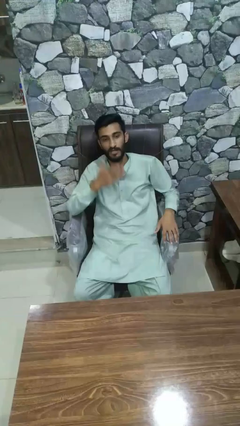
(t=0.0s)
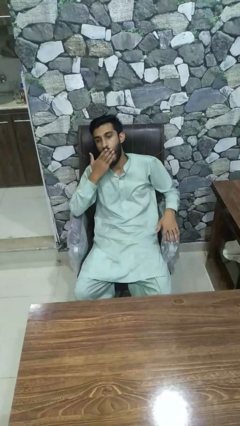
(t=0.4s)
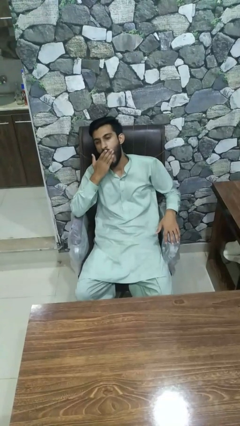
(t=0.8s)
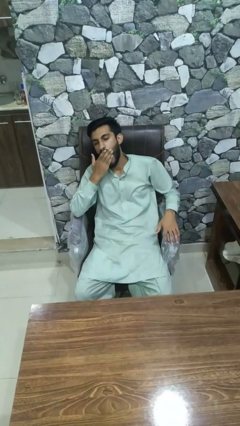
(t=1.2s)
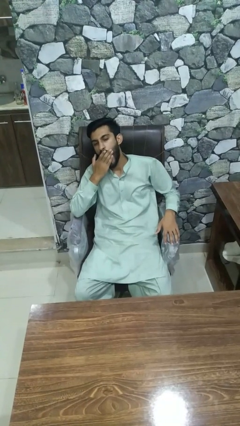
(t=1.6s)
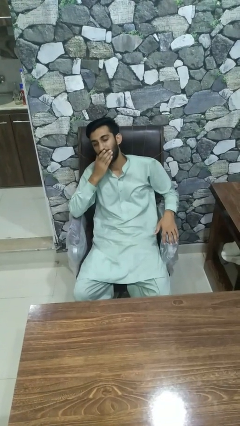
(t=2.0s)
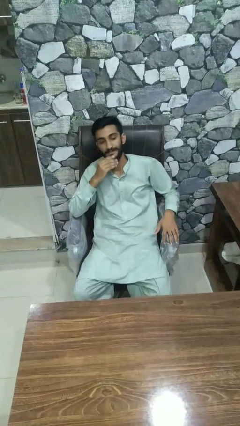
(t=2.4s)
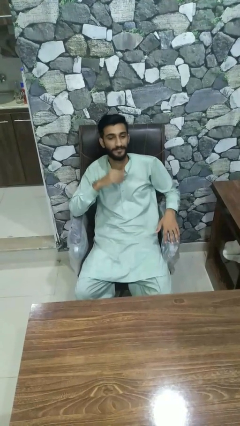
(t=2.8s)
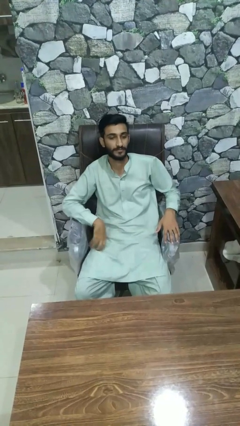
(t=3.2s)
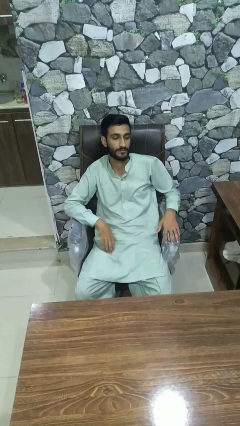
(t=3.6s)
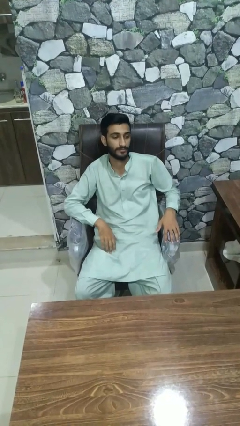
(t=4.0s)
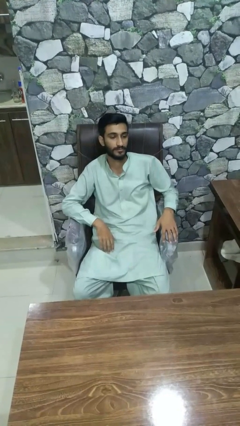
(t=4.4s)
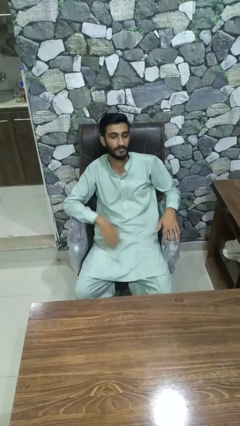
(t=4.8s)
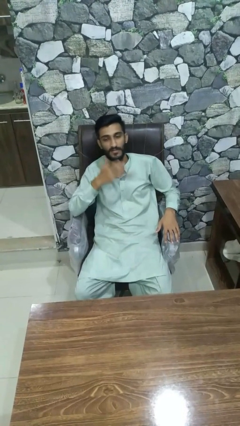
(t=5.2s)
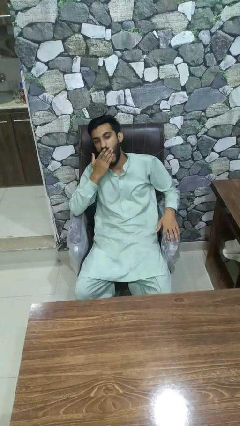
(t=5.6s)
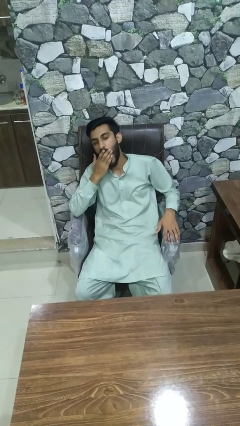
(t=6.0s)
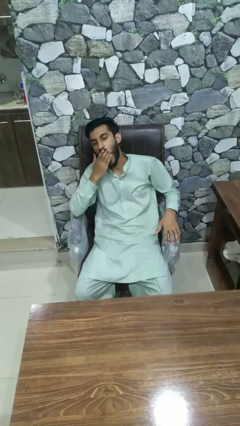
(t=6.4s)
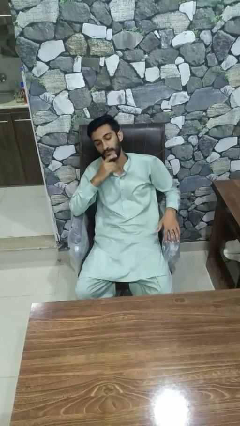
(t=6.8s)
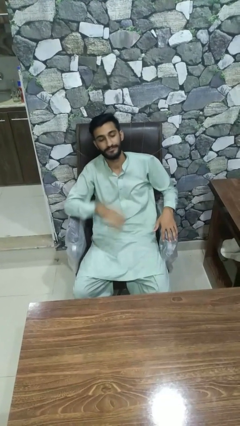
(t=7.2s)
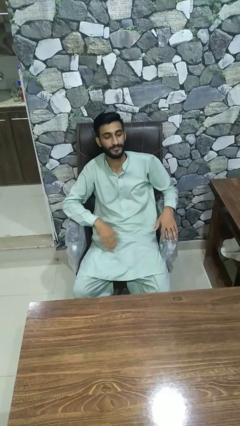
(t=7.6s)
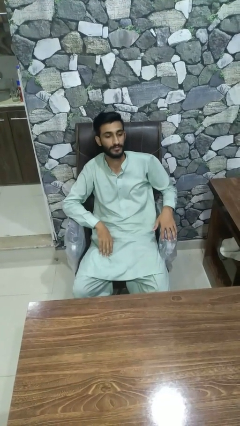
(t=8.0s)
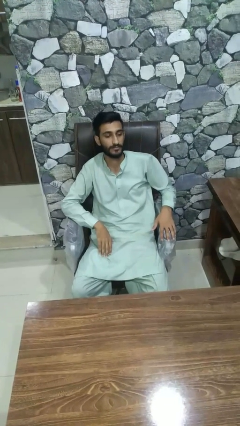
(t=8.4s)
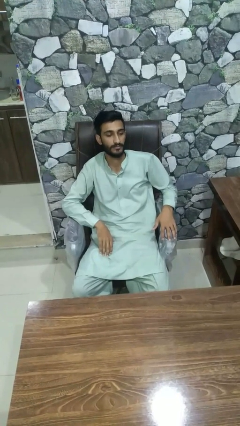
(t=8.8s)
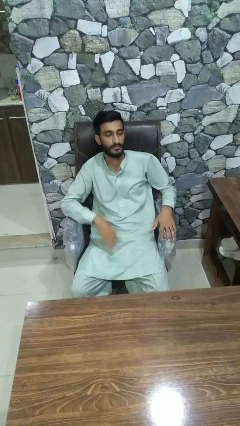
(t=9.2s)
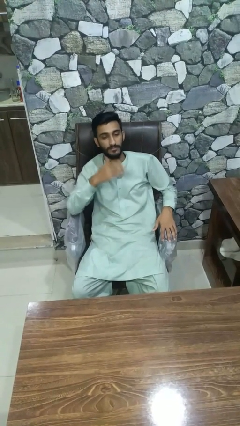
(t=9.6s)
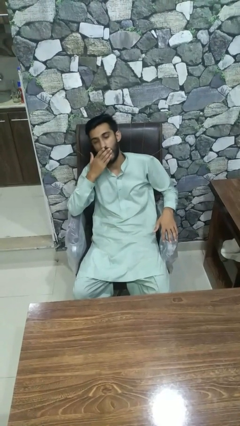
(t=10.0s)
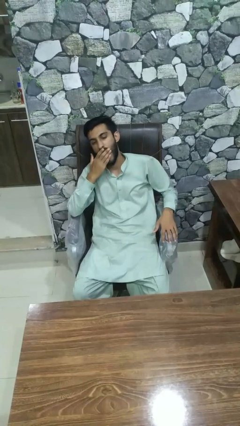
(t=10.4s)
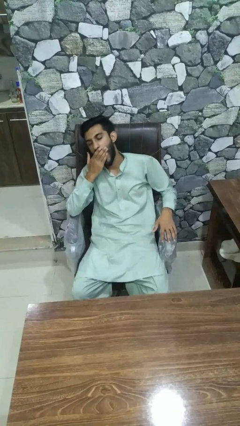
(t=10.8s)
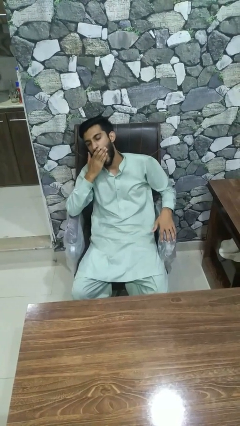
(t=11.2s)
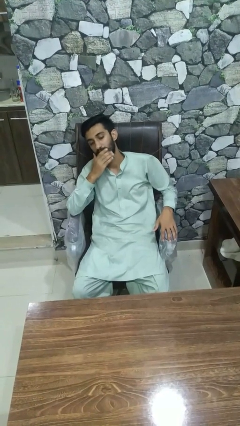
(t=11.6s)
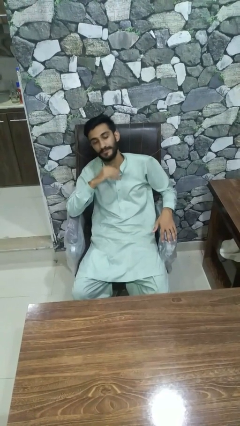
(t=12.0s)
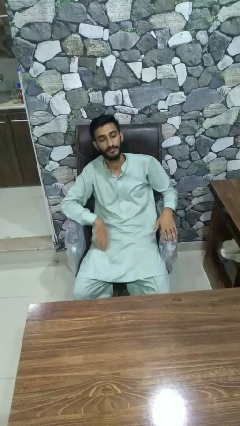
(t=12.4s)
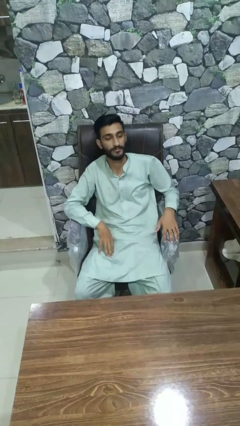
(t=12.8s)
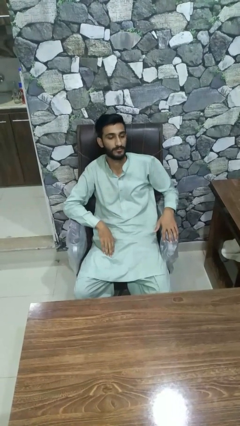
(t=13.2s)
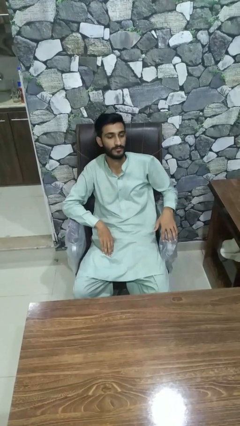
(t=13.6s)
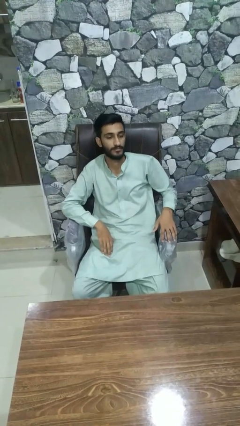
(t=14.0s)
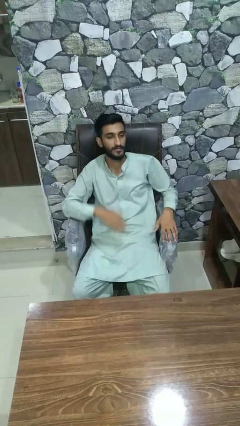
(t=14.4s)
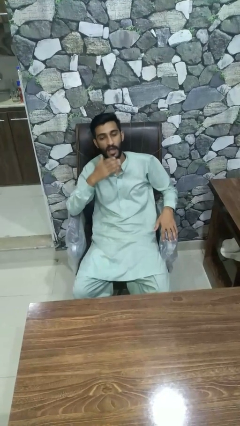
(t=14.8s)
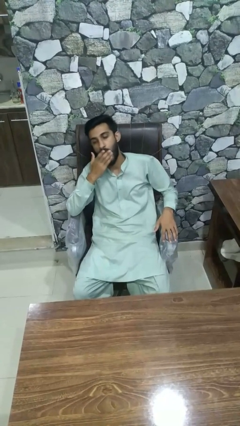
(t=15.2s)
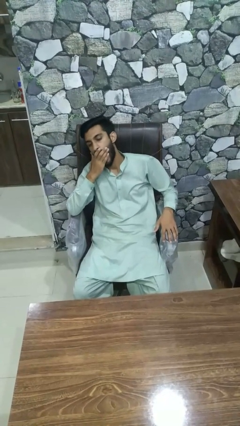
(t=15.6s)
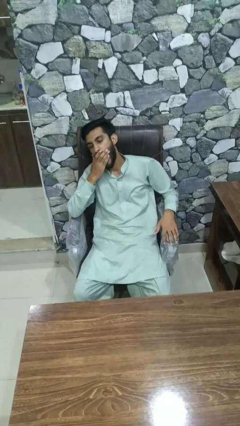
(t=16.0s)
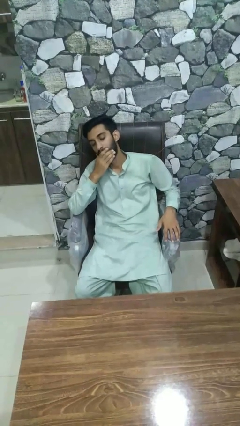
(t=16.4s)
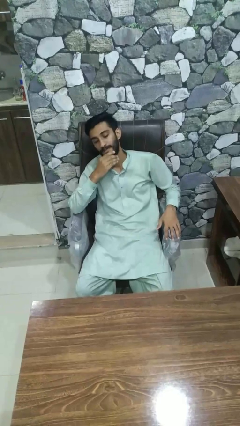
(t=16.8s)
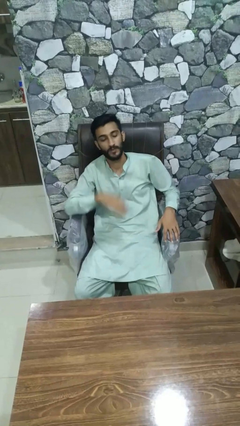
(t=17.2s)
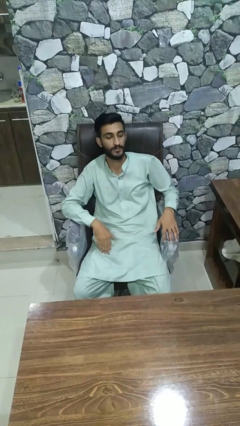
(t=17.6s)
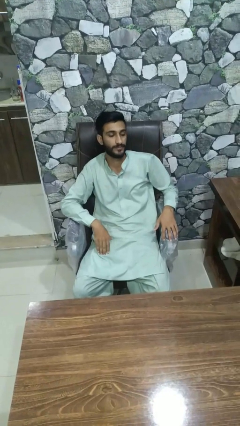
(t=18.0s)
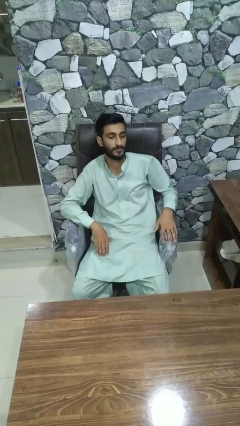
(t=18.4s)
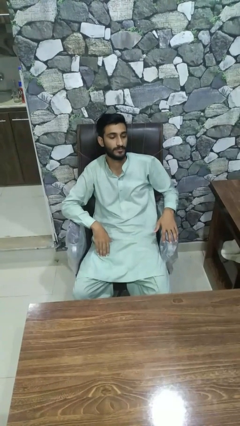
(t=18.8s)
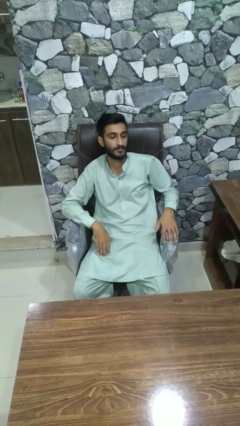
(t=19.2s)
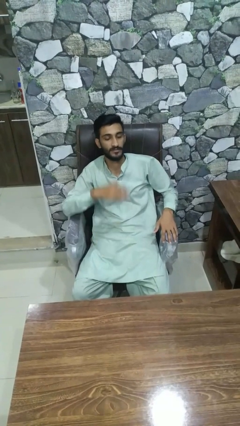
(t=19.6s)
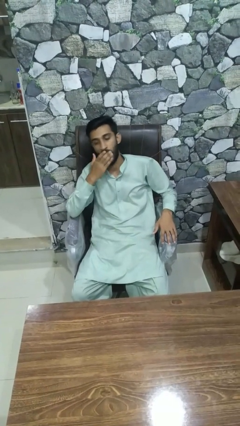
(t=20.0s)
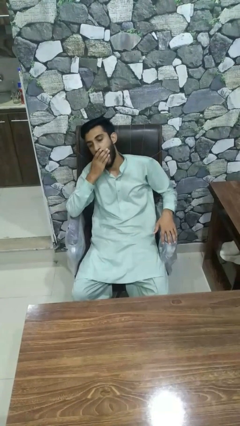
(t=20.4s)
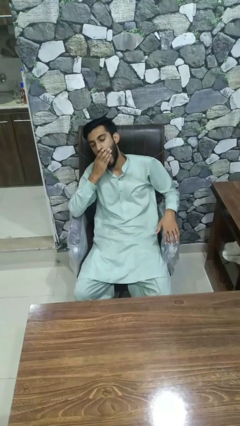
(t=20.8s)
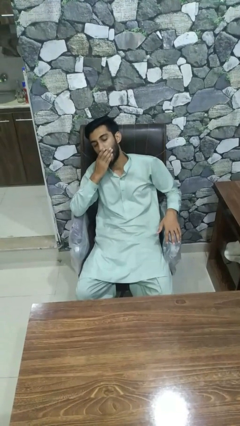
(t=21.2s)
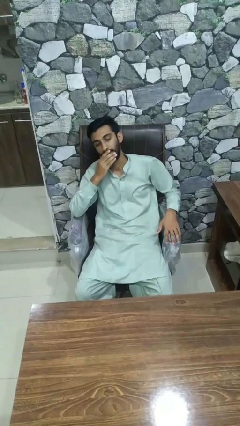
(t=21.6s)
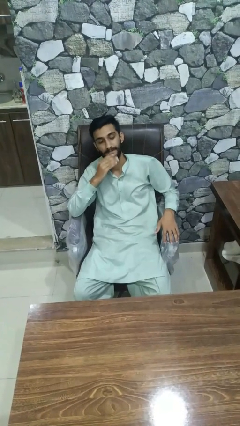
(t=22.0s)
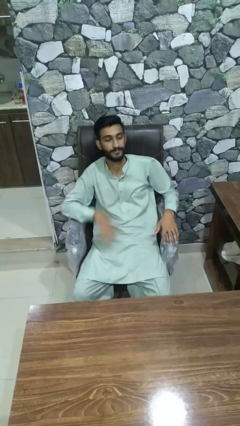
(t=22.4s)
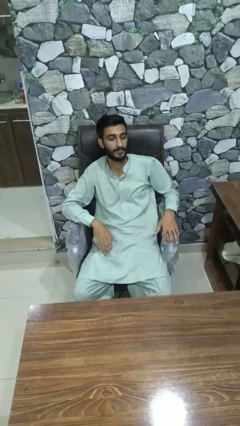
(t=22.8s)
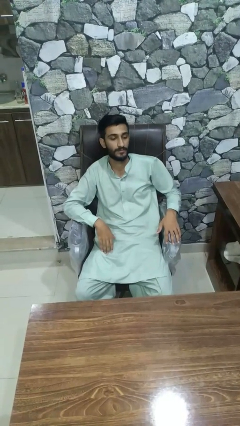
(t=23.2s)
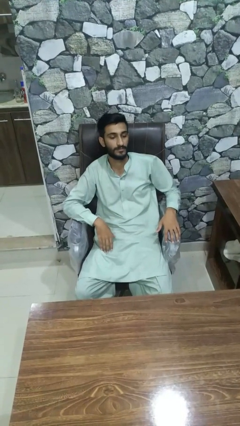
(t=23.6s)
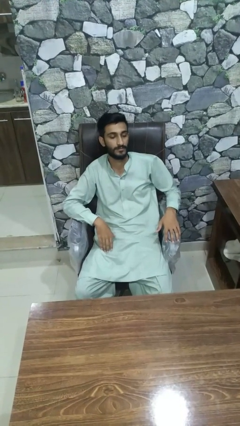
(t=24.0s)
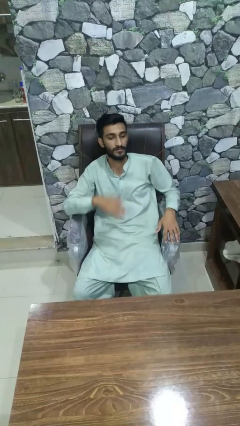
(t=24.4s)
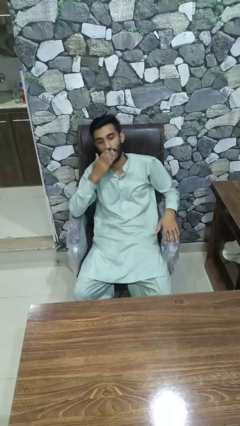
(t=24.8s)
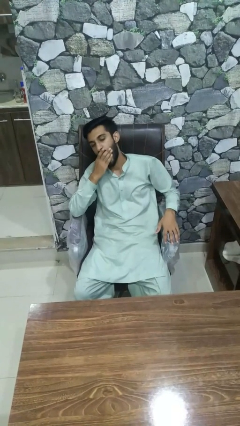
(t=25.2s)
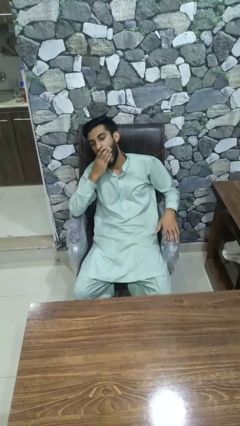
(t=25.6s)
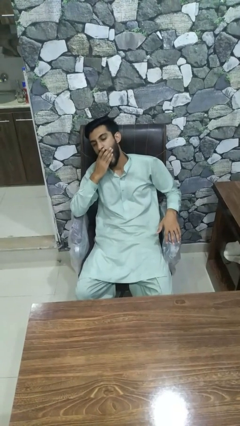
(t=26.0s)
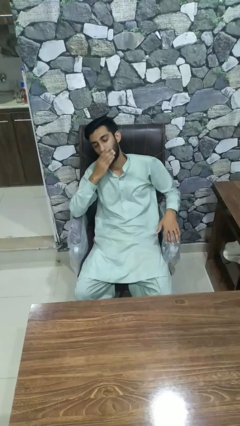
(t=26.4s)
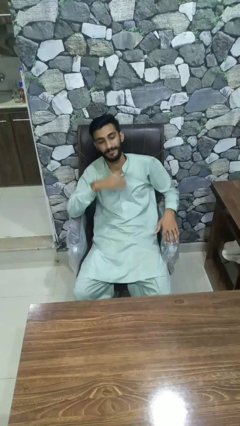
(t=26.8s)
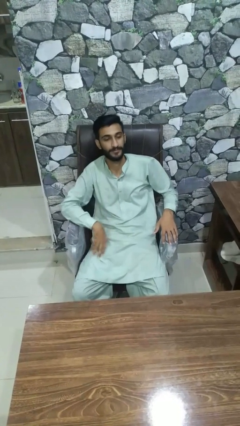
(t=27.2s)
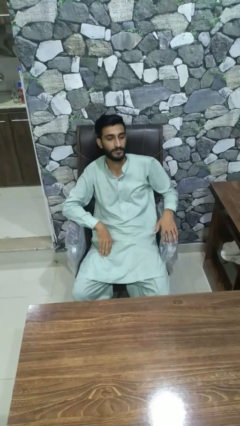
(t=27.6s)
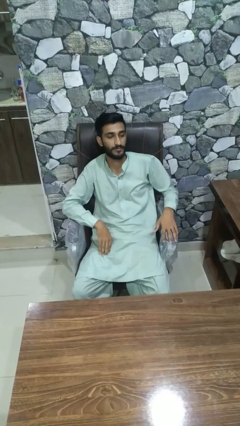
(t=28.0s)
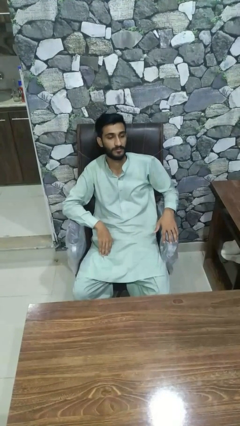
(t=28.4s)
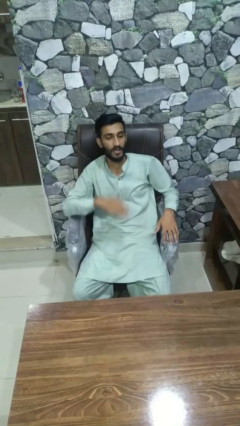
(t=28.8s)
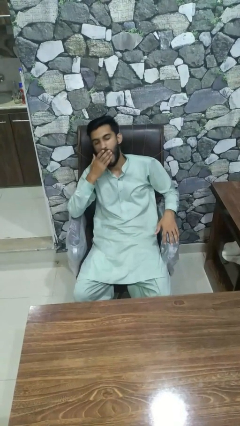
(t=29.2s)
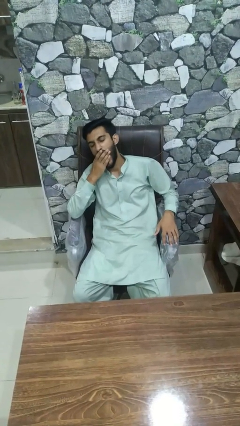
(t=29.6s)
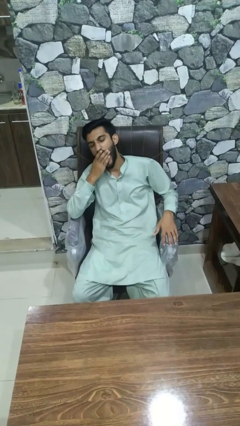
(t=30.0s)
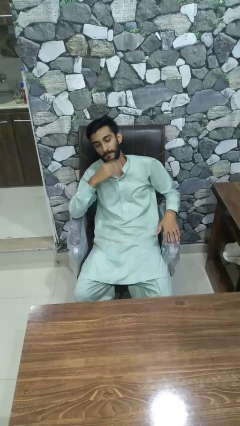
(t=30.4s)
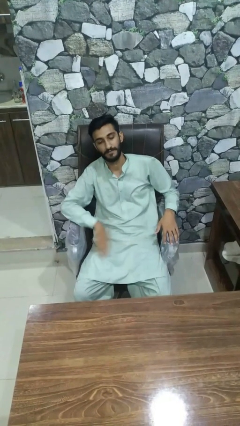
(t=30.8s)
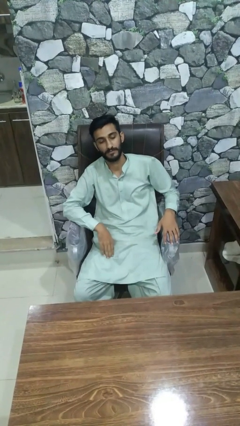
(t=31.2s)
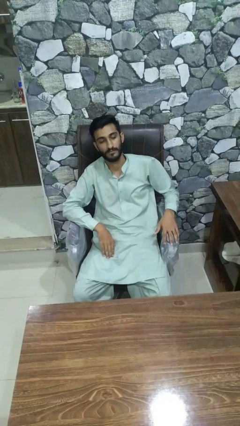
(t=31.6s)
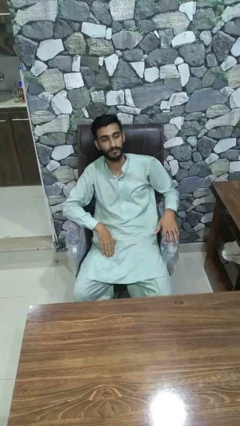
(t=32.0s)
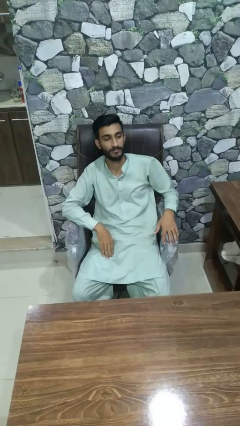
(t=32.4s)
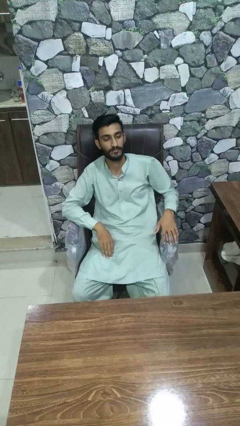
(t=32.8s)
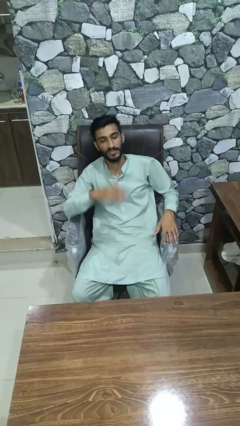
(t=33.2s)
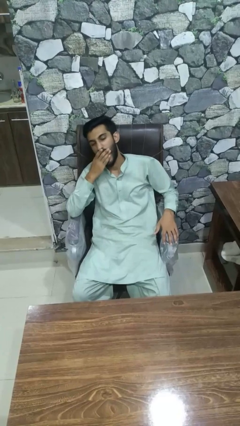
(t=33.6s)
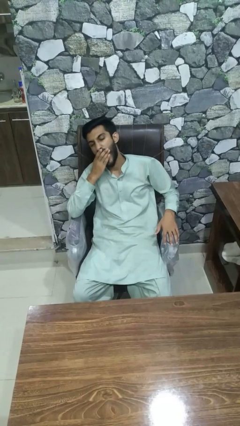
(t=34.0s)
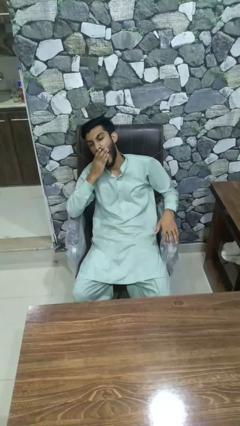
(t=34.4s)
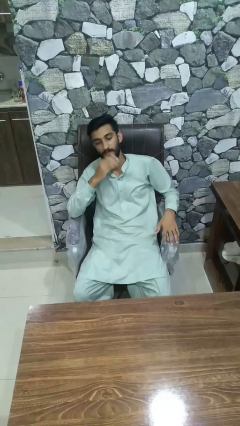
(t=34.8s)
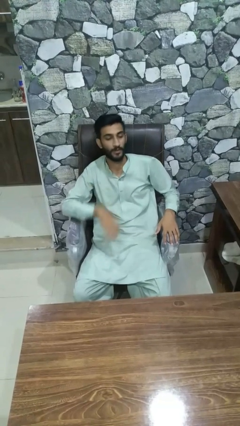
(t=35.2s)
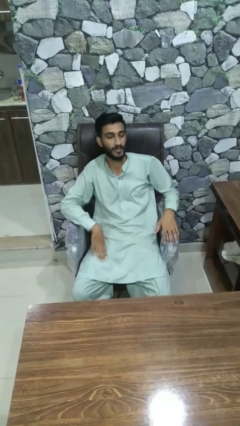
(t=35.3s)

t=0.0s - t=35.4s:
person yawns

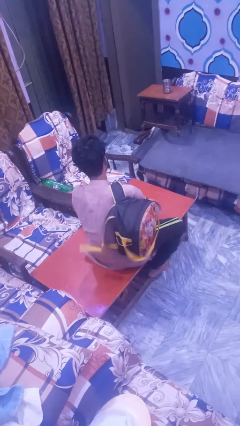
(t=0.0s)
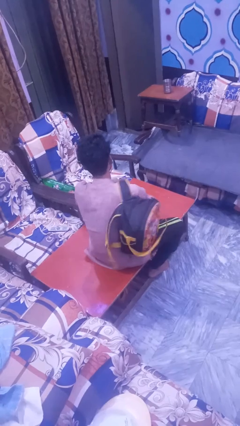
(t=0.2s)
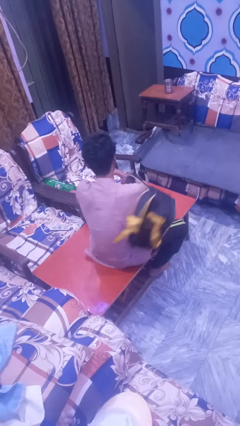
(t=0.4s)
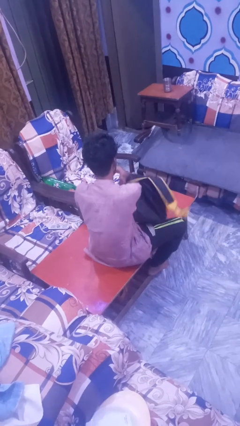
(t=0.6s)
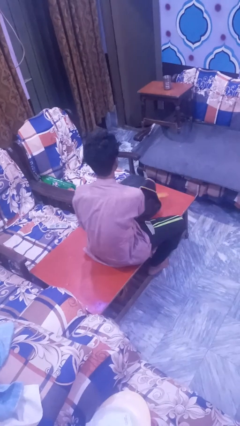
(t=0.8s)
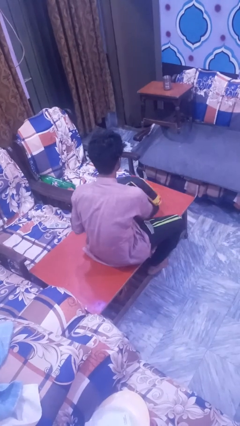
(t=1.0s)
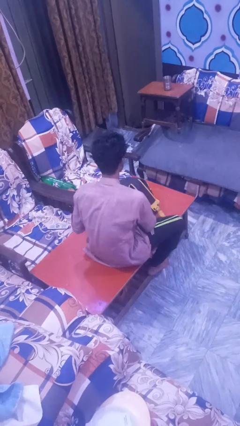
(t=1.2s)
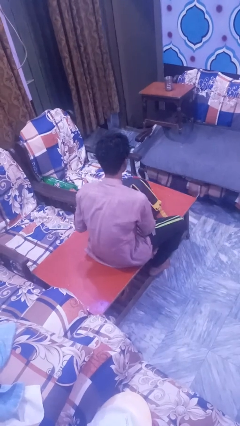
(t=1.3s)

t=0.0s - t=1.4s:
person takes off backpack
